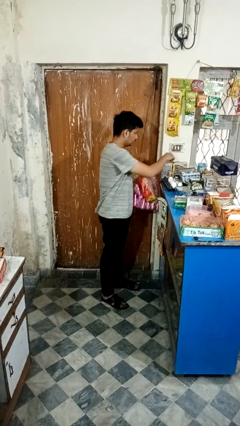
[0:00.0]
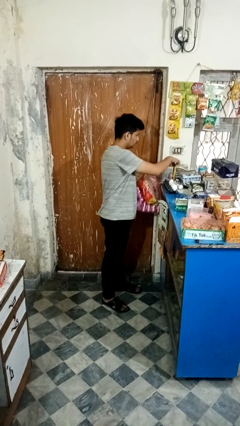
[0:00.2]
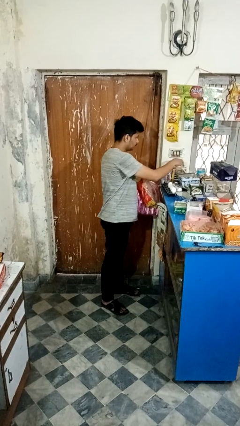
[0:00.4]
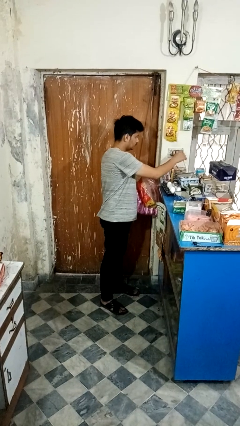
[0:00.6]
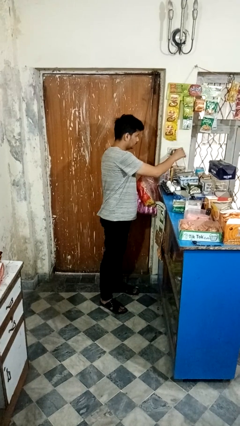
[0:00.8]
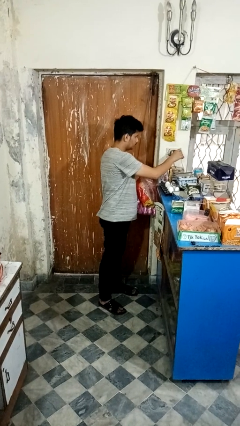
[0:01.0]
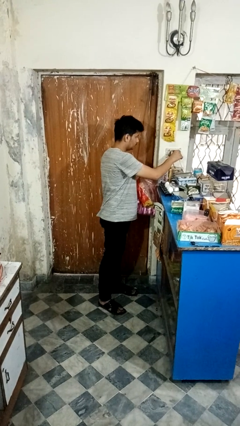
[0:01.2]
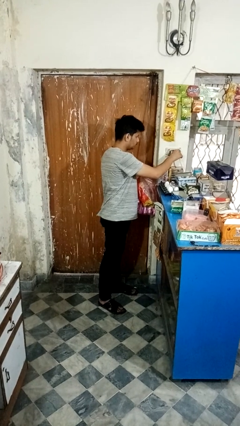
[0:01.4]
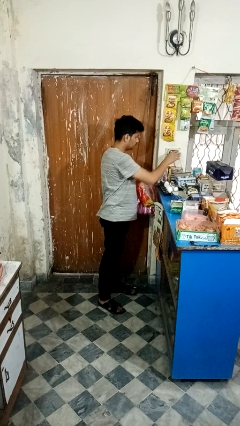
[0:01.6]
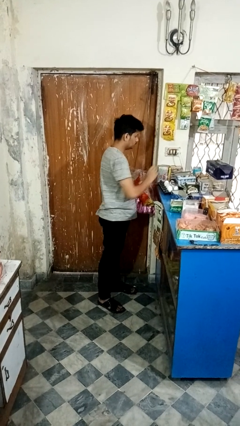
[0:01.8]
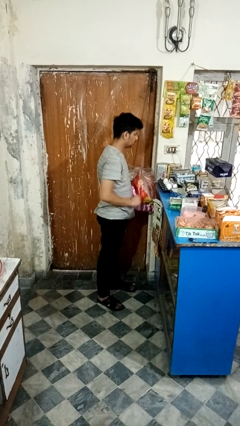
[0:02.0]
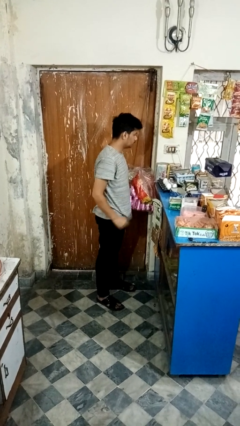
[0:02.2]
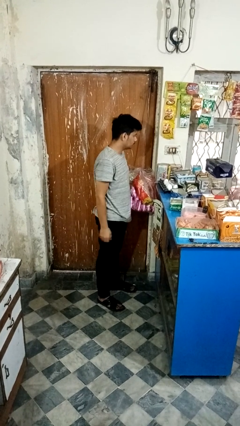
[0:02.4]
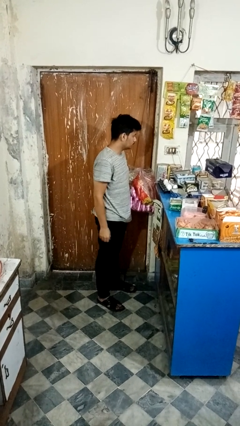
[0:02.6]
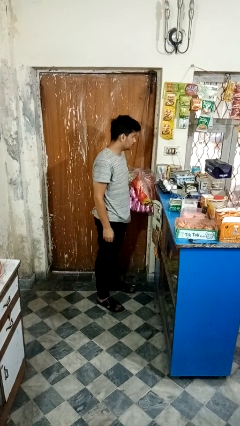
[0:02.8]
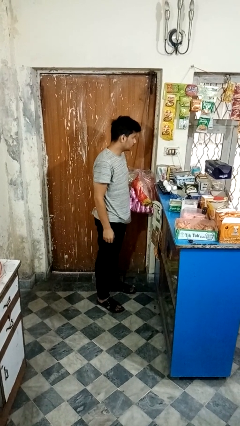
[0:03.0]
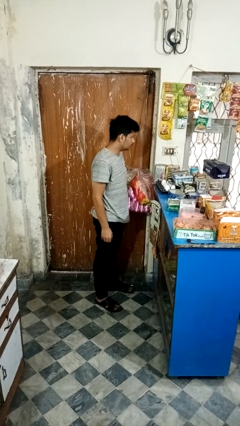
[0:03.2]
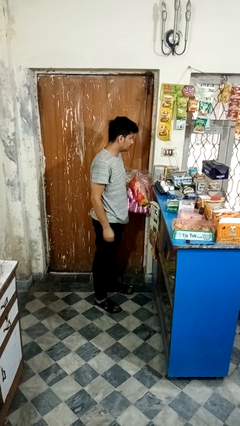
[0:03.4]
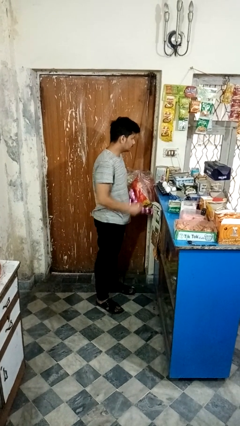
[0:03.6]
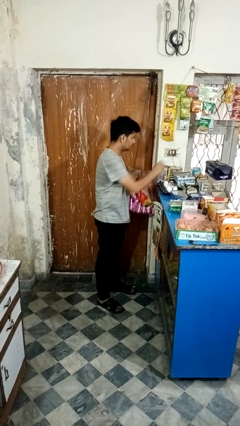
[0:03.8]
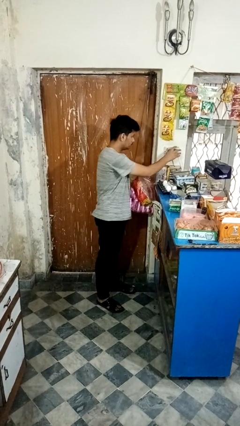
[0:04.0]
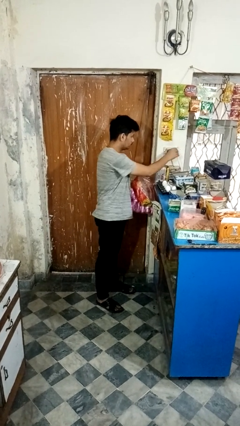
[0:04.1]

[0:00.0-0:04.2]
person plugs into electrical socket

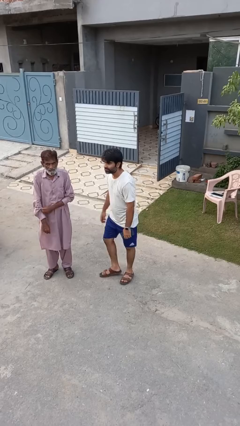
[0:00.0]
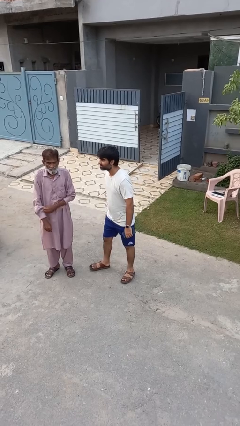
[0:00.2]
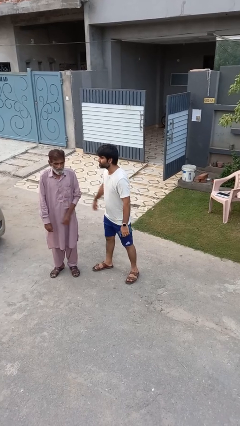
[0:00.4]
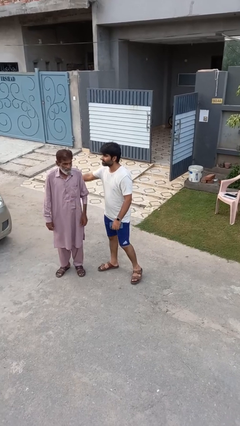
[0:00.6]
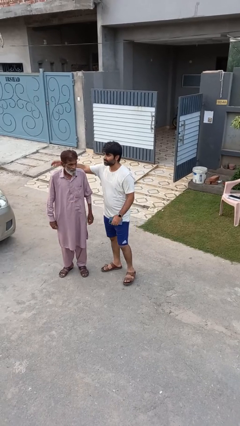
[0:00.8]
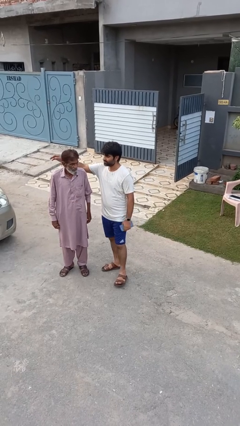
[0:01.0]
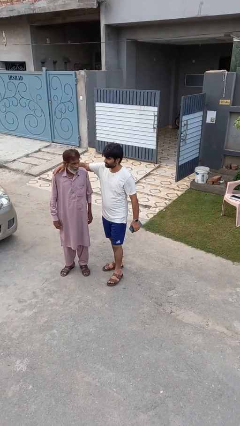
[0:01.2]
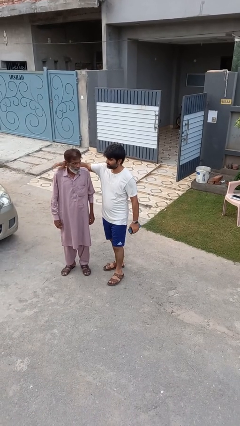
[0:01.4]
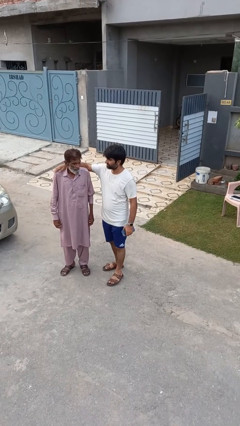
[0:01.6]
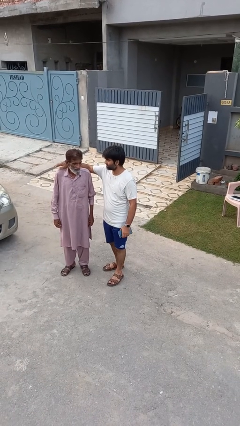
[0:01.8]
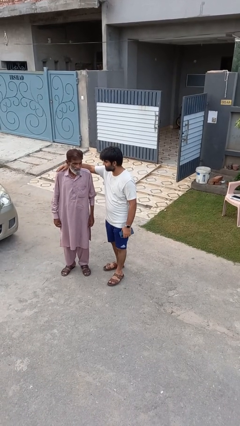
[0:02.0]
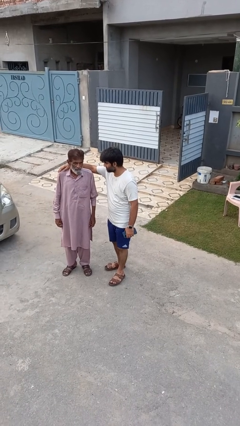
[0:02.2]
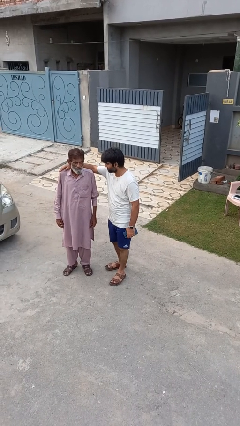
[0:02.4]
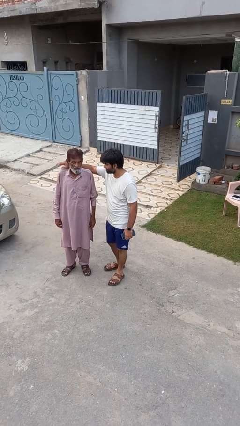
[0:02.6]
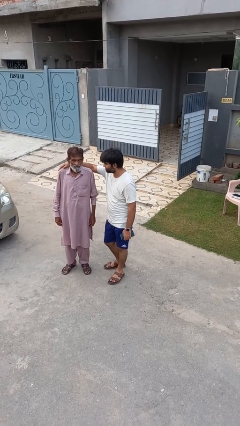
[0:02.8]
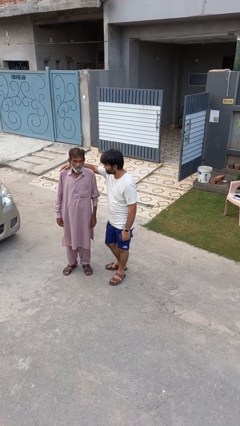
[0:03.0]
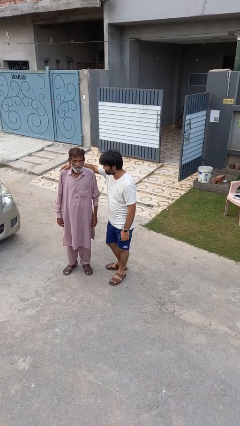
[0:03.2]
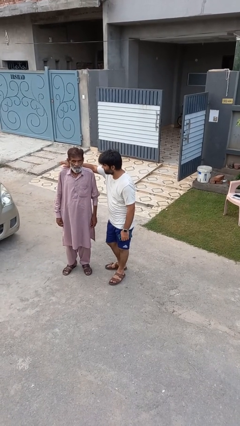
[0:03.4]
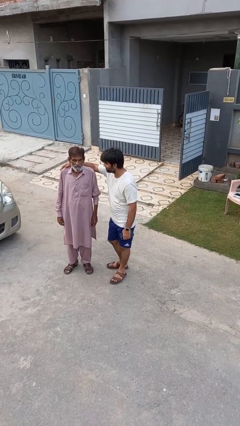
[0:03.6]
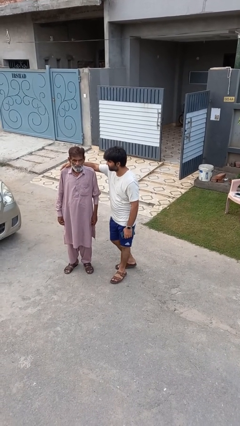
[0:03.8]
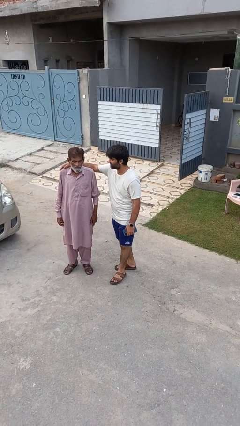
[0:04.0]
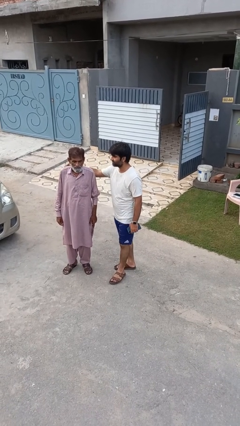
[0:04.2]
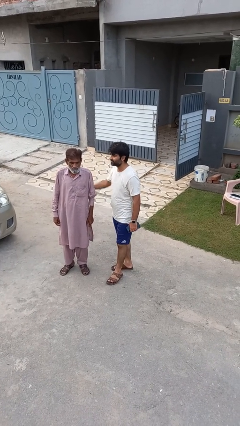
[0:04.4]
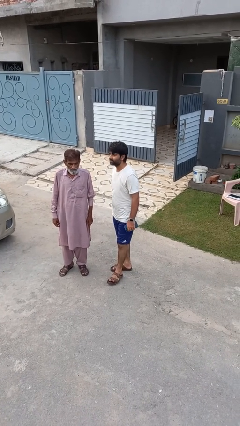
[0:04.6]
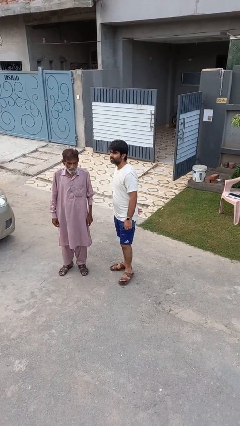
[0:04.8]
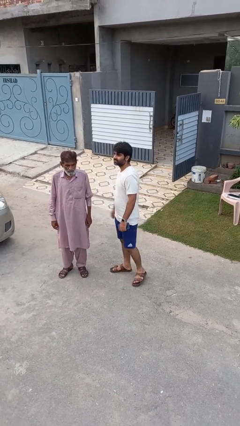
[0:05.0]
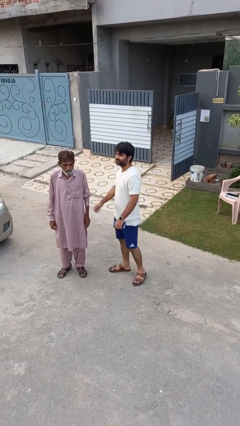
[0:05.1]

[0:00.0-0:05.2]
person pounds shoulders of person

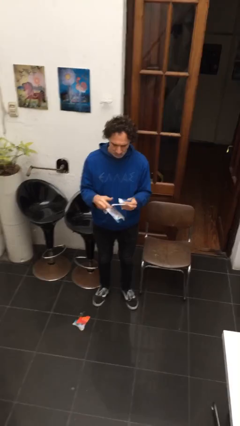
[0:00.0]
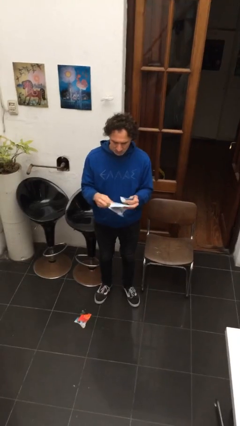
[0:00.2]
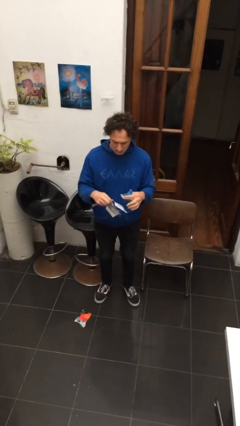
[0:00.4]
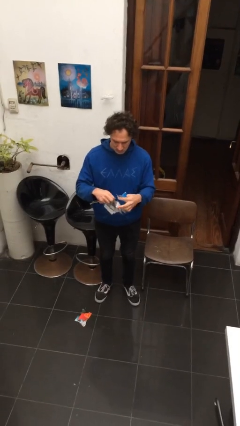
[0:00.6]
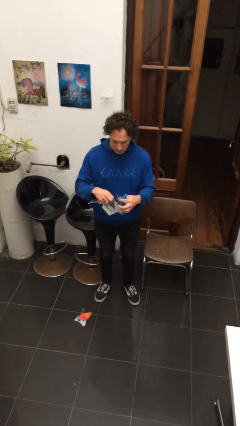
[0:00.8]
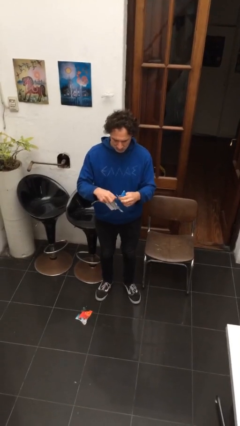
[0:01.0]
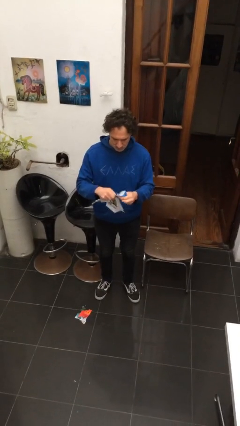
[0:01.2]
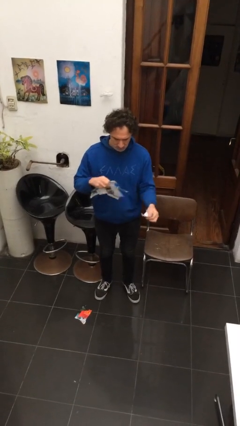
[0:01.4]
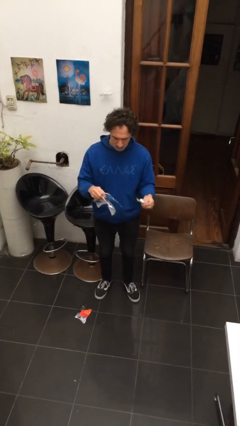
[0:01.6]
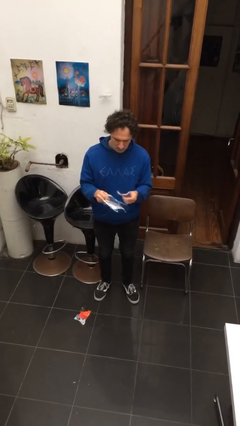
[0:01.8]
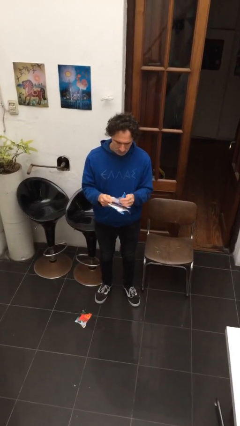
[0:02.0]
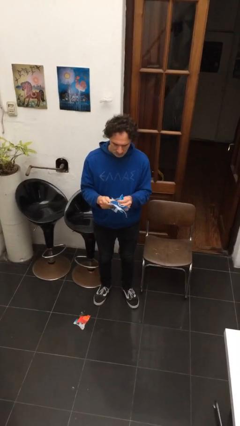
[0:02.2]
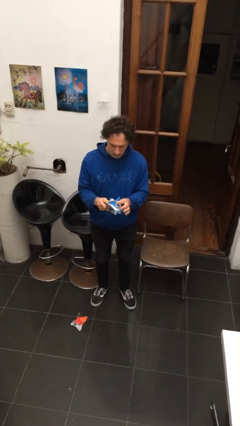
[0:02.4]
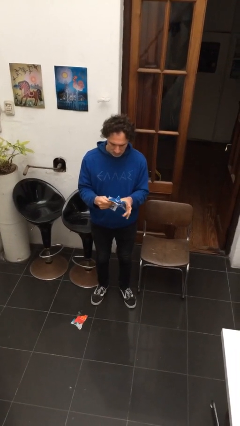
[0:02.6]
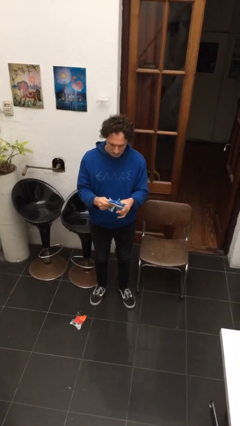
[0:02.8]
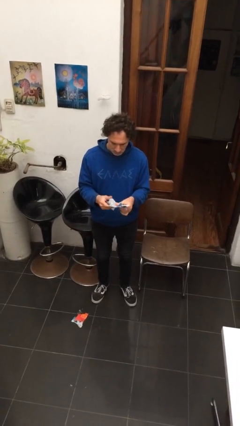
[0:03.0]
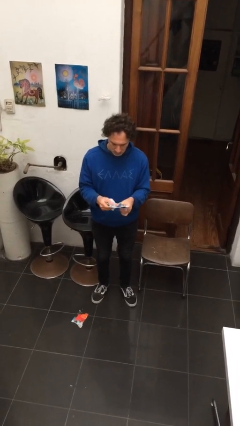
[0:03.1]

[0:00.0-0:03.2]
person tears paper

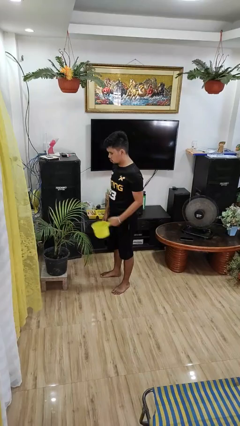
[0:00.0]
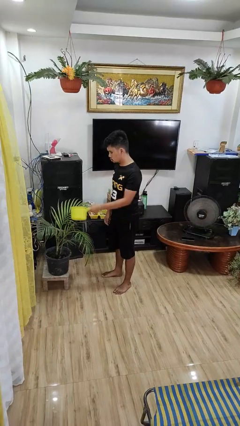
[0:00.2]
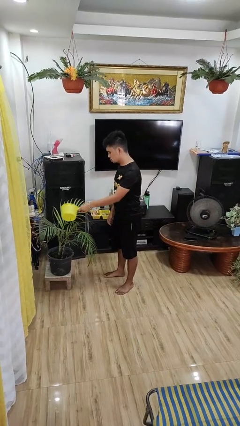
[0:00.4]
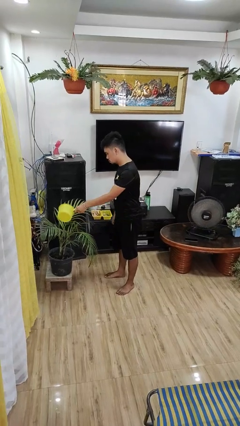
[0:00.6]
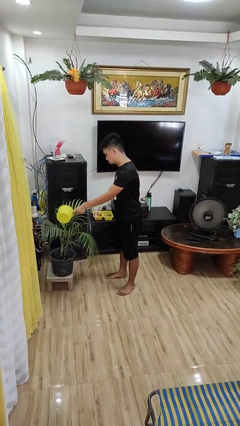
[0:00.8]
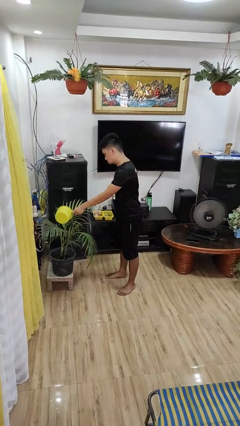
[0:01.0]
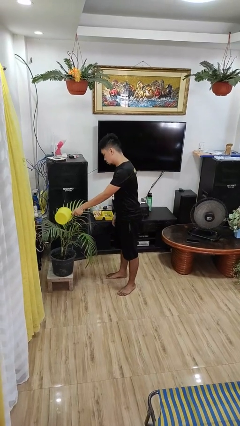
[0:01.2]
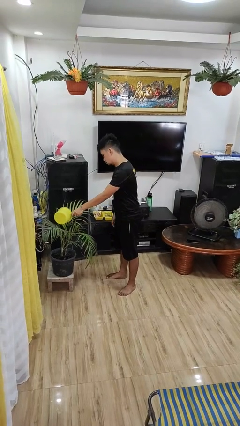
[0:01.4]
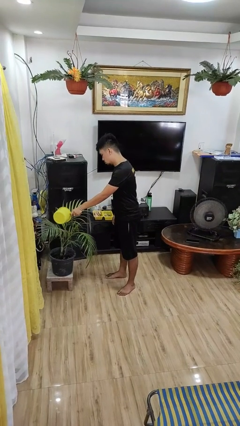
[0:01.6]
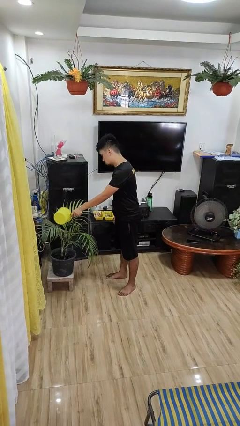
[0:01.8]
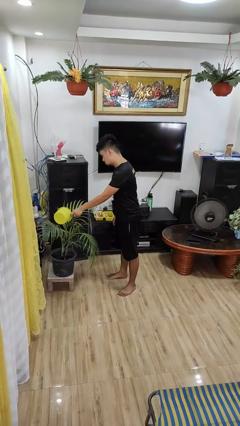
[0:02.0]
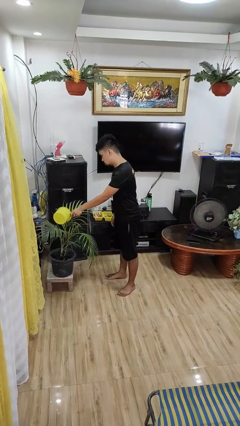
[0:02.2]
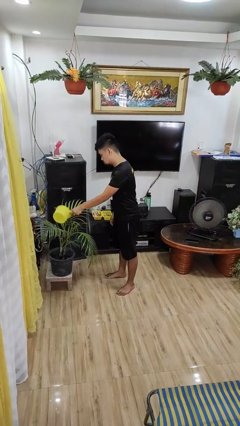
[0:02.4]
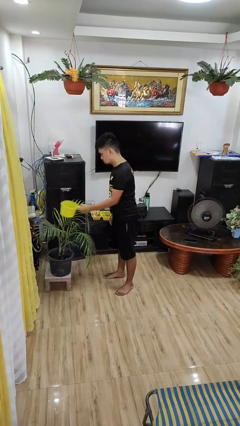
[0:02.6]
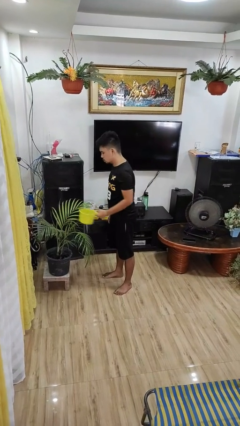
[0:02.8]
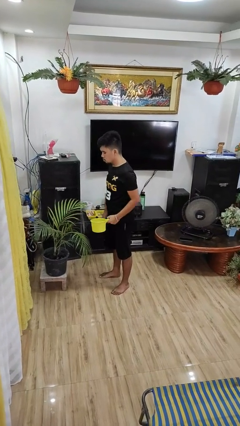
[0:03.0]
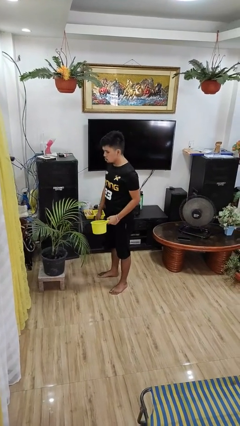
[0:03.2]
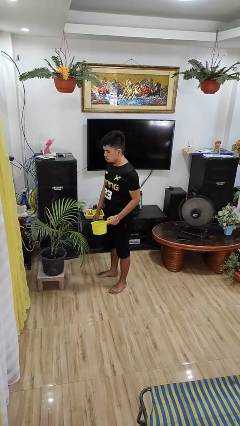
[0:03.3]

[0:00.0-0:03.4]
person waters houseplant

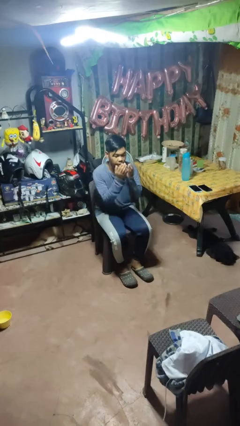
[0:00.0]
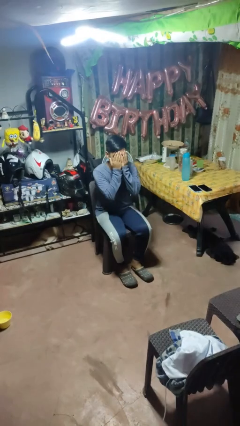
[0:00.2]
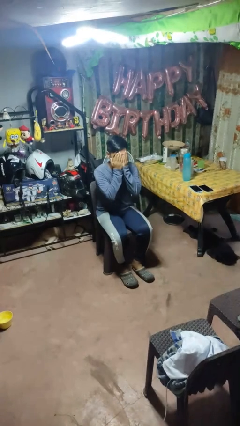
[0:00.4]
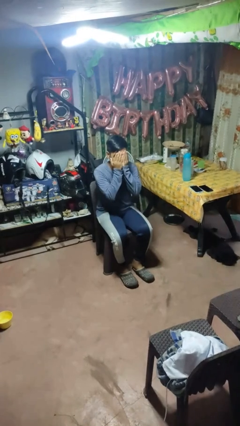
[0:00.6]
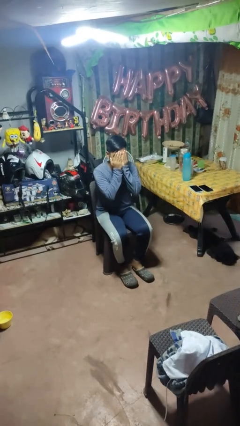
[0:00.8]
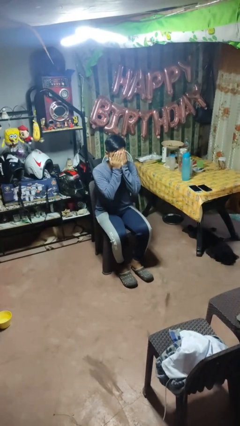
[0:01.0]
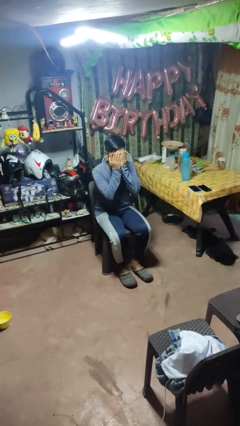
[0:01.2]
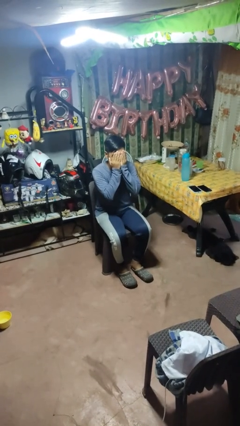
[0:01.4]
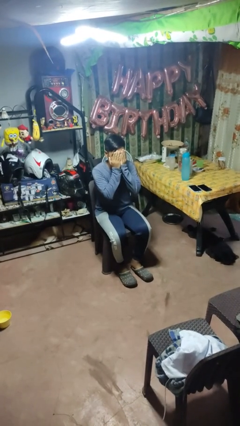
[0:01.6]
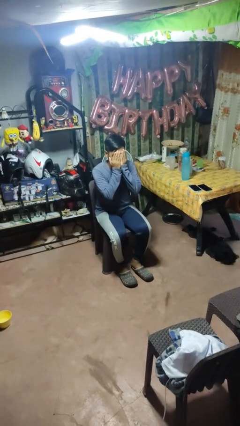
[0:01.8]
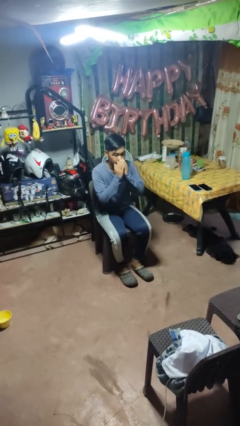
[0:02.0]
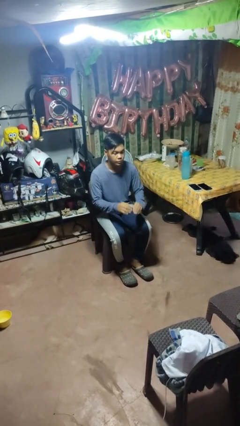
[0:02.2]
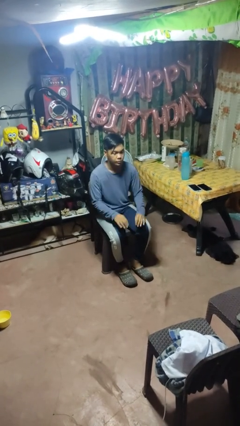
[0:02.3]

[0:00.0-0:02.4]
person covers face with hands
